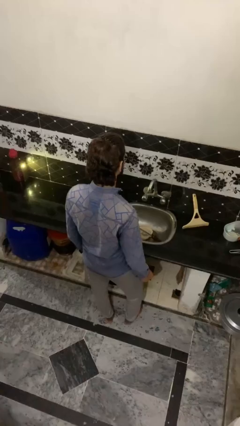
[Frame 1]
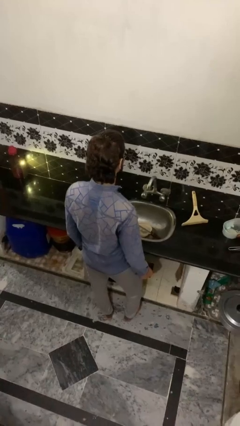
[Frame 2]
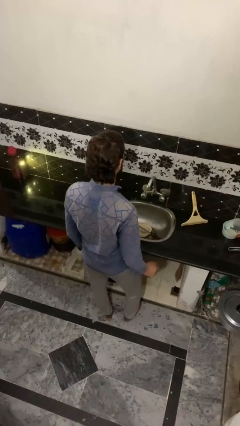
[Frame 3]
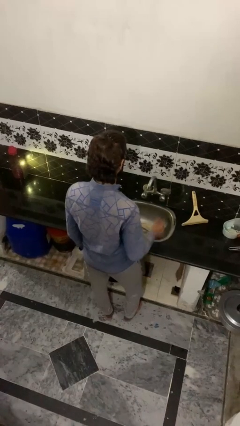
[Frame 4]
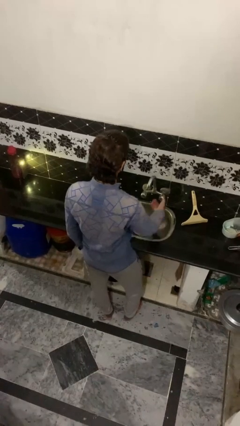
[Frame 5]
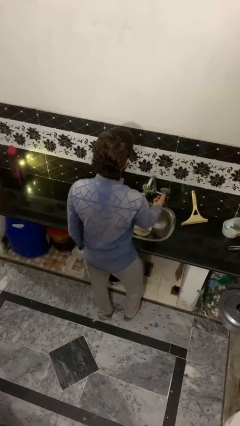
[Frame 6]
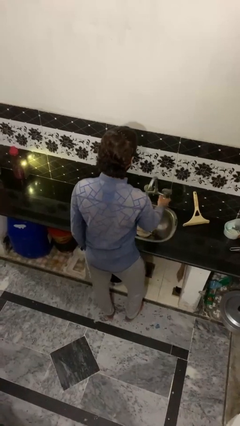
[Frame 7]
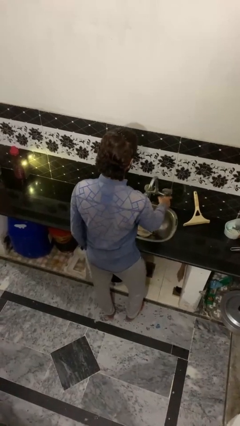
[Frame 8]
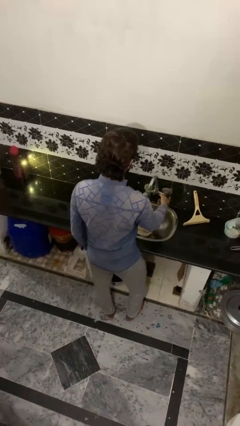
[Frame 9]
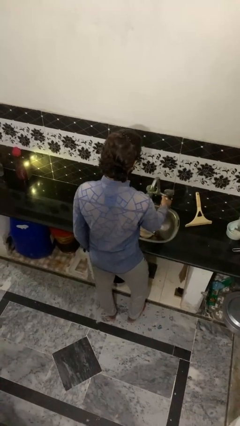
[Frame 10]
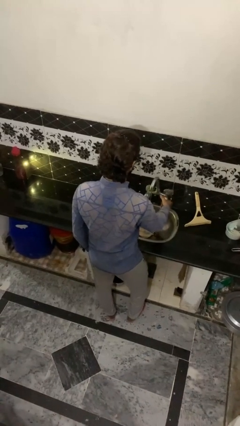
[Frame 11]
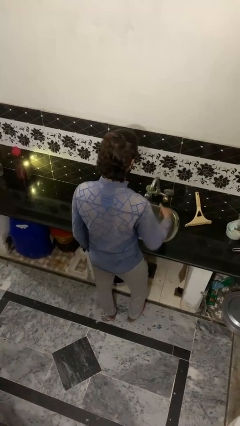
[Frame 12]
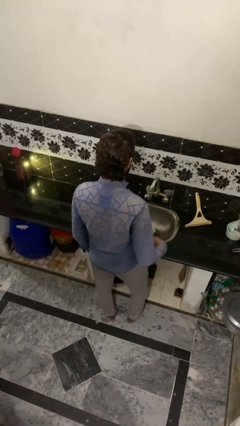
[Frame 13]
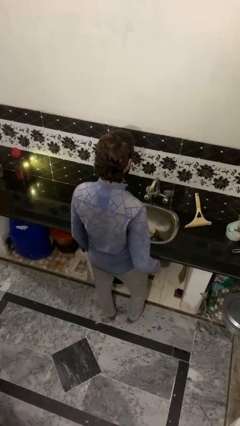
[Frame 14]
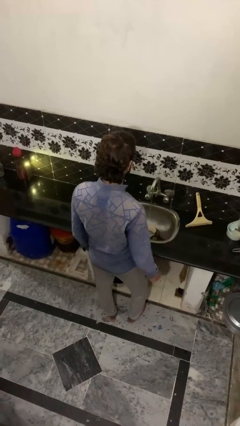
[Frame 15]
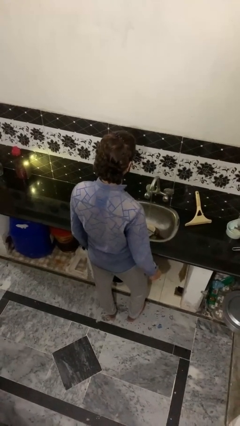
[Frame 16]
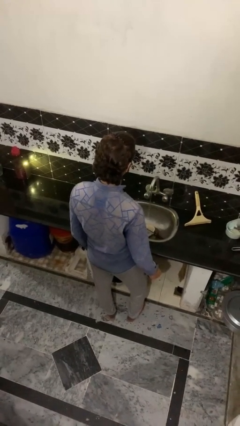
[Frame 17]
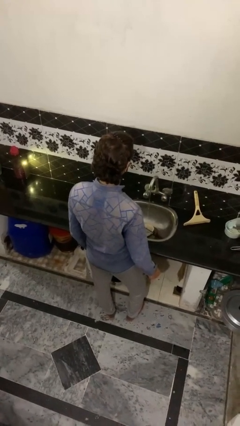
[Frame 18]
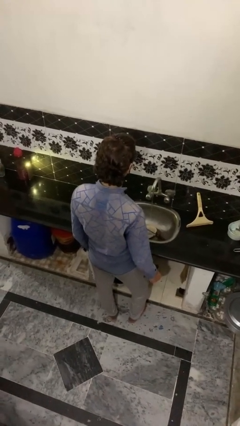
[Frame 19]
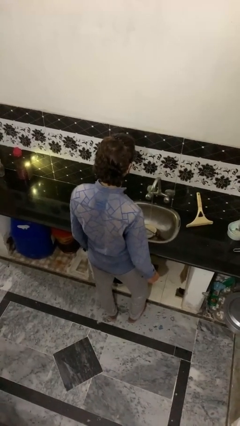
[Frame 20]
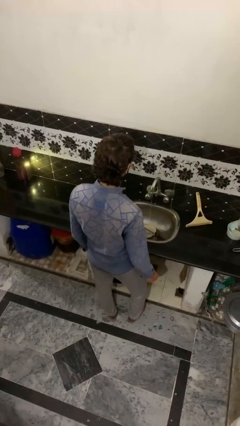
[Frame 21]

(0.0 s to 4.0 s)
person turns on faucet

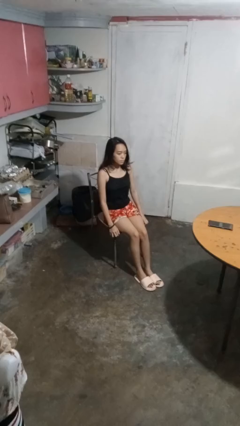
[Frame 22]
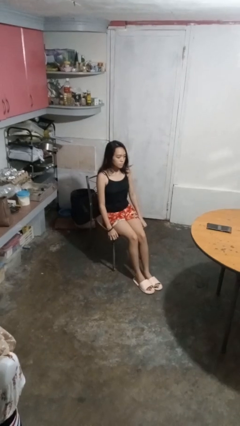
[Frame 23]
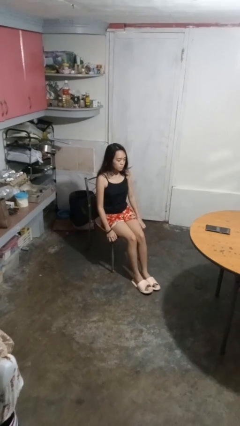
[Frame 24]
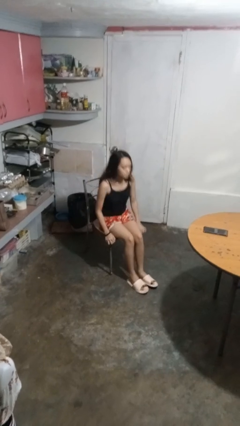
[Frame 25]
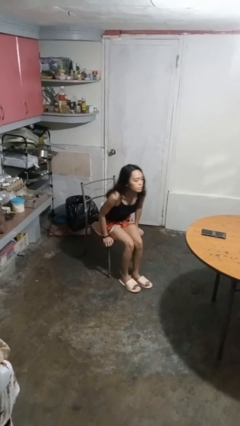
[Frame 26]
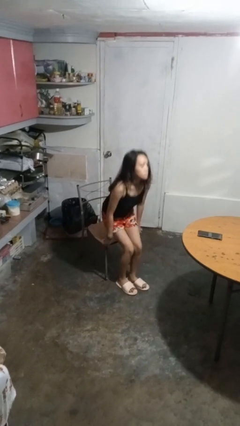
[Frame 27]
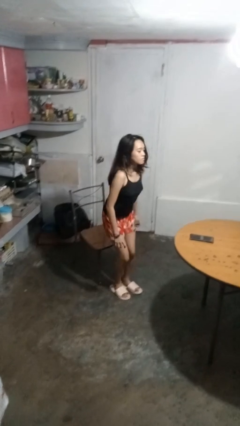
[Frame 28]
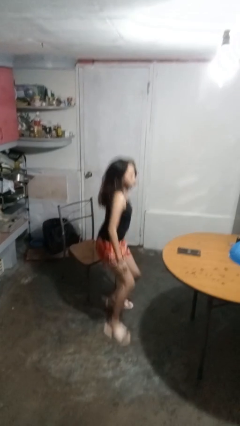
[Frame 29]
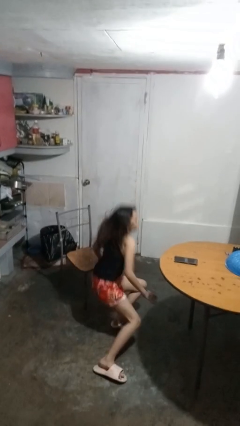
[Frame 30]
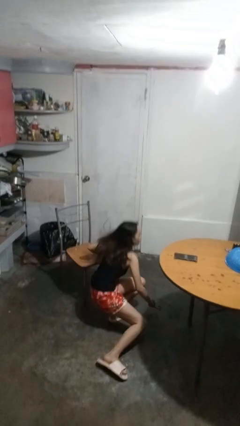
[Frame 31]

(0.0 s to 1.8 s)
person falls from chair

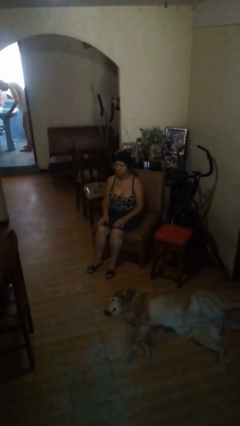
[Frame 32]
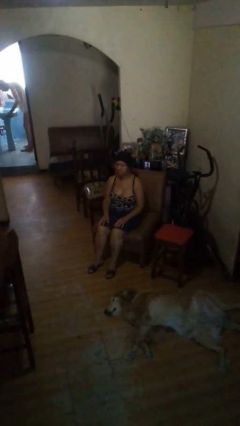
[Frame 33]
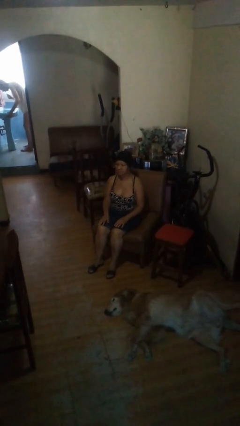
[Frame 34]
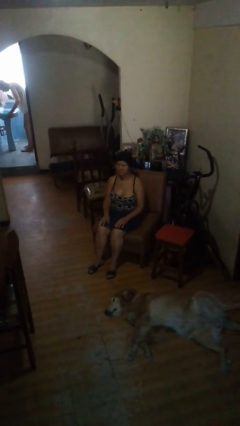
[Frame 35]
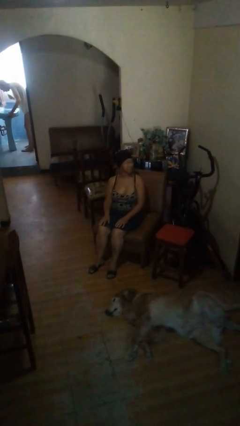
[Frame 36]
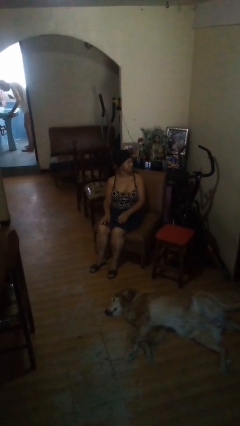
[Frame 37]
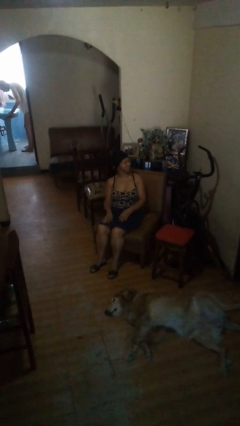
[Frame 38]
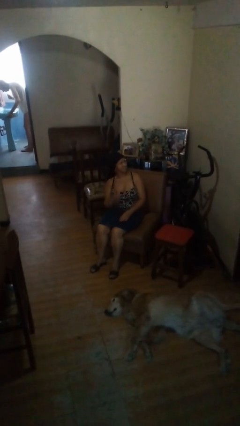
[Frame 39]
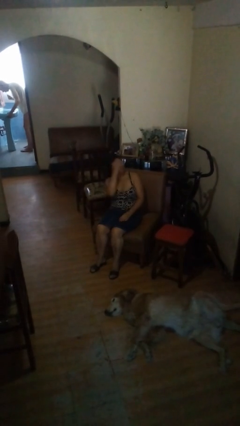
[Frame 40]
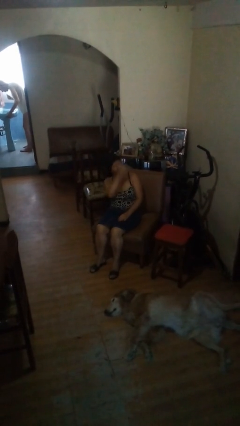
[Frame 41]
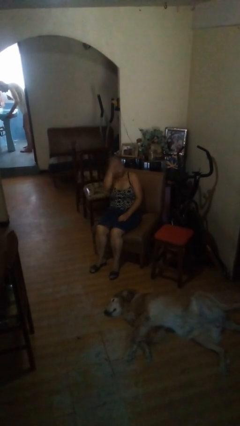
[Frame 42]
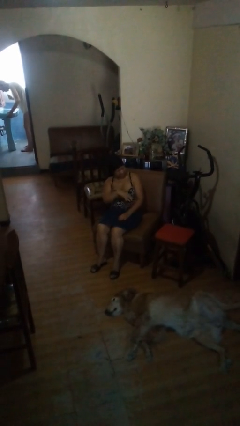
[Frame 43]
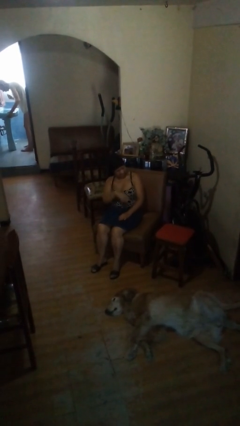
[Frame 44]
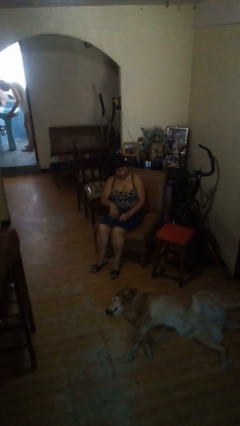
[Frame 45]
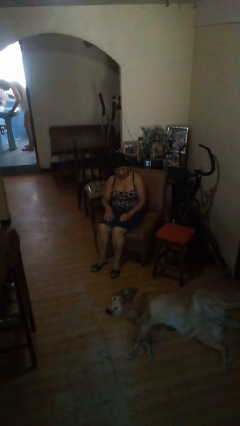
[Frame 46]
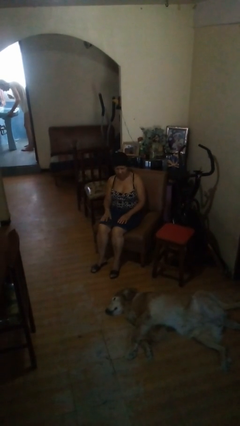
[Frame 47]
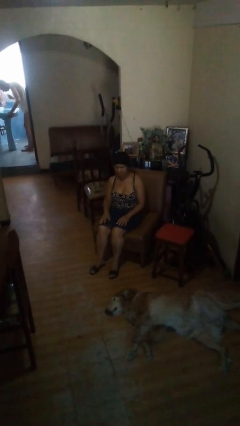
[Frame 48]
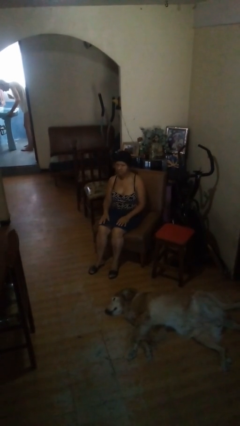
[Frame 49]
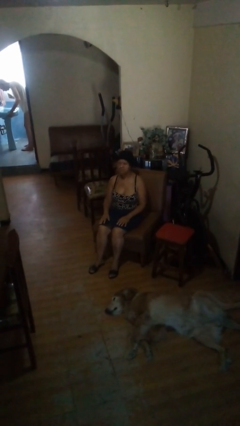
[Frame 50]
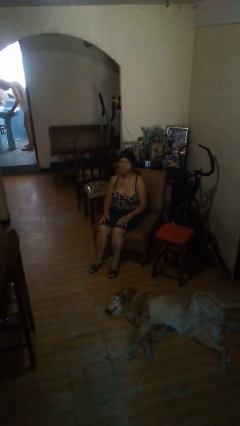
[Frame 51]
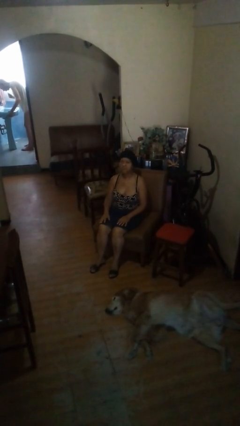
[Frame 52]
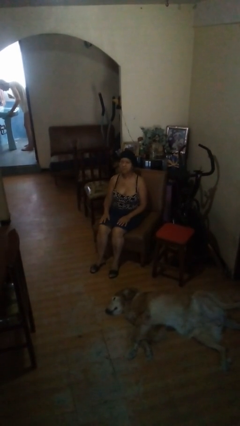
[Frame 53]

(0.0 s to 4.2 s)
person swats bug

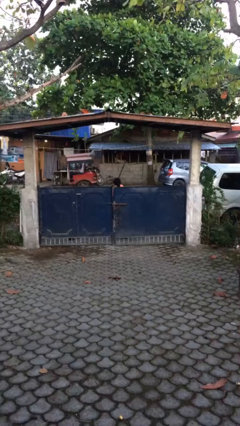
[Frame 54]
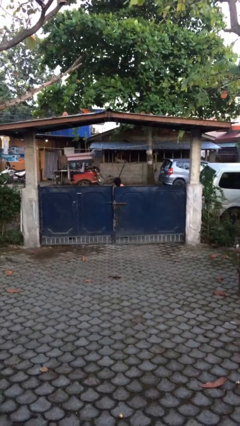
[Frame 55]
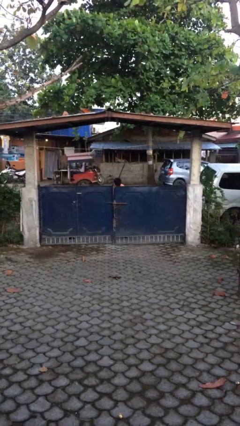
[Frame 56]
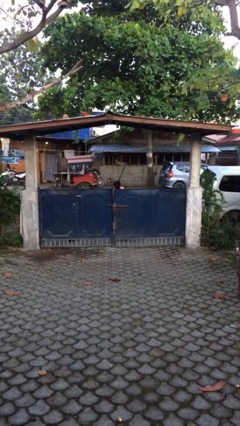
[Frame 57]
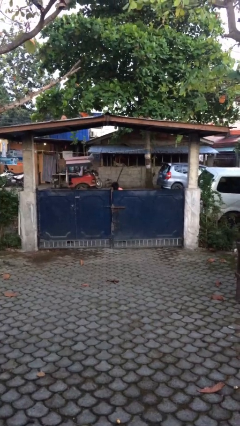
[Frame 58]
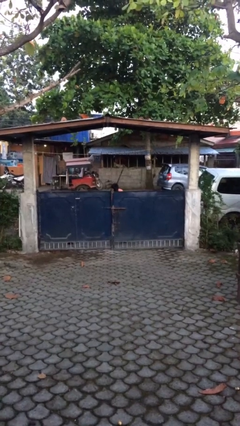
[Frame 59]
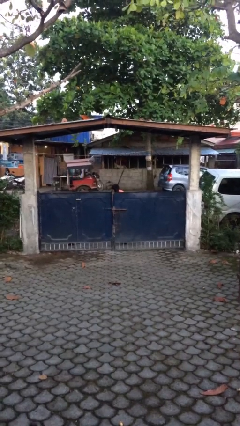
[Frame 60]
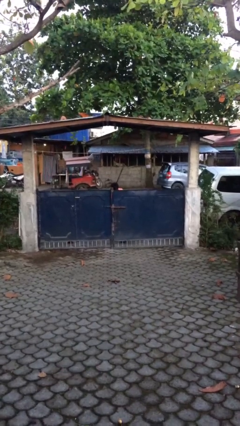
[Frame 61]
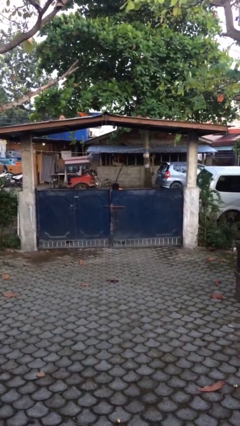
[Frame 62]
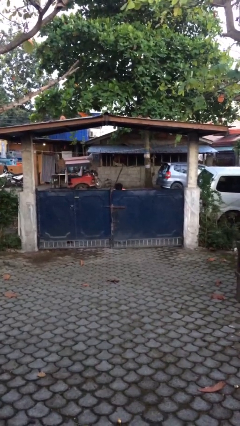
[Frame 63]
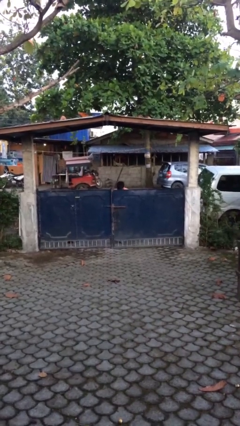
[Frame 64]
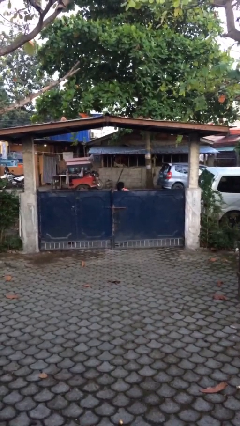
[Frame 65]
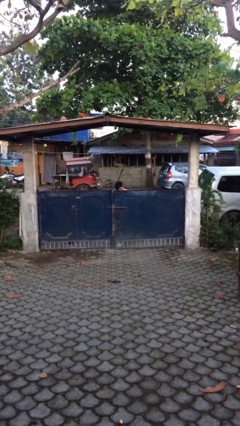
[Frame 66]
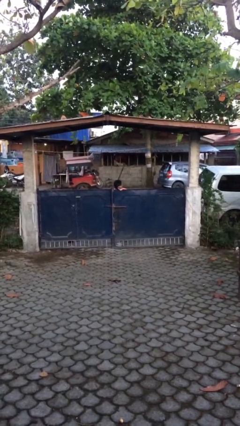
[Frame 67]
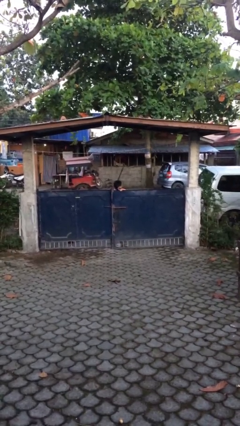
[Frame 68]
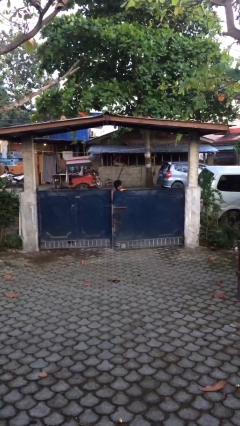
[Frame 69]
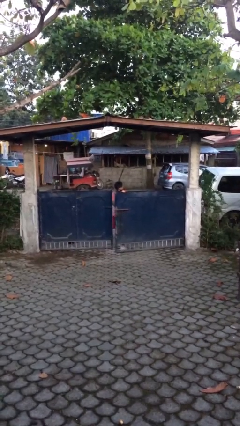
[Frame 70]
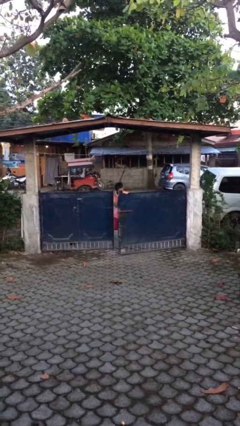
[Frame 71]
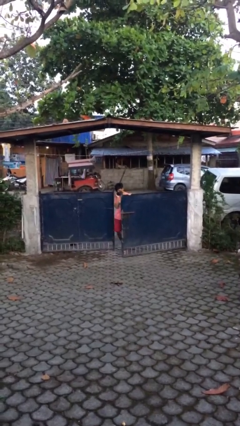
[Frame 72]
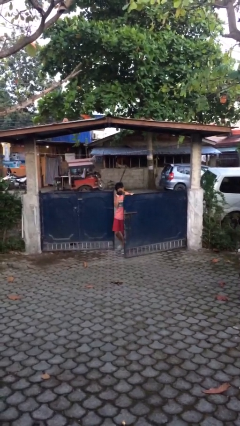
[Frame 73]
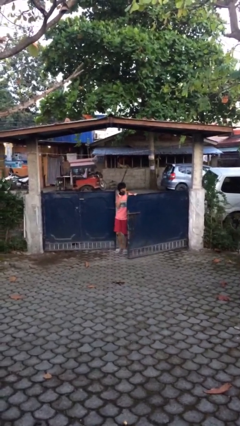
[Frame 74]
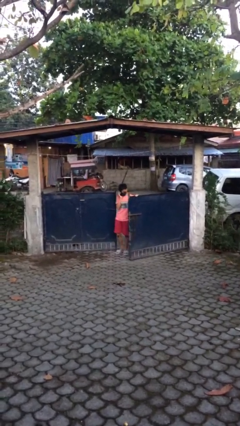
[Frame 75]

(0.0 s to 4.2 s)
person opens facility door

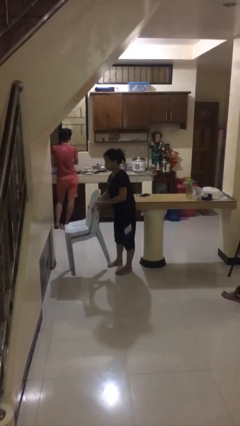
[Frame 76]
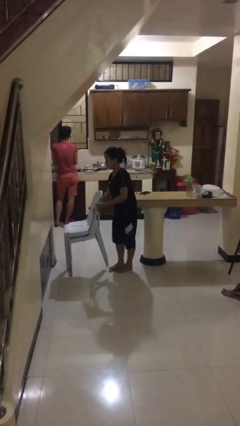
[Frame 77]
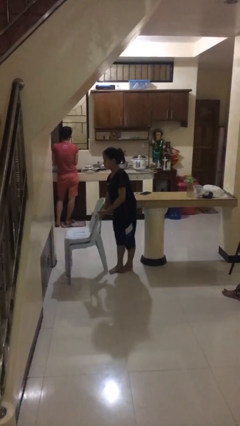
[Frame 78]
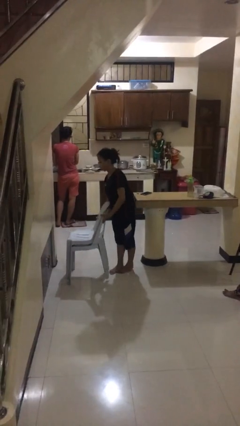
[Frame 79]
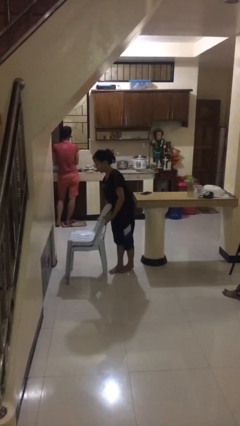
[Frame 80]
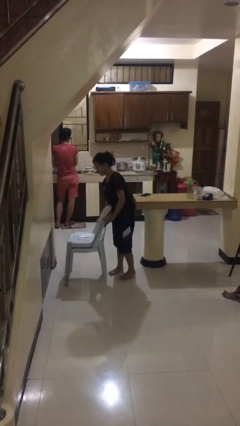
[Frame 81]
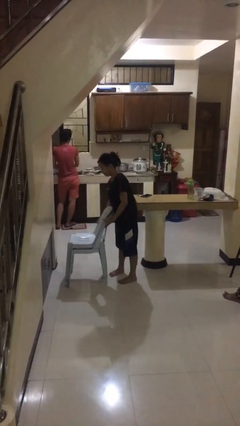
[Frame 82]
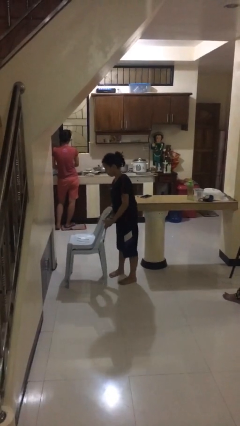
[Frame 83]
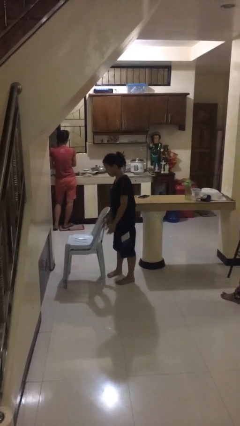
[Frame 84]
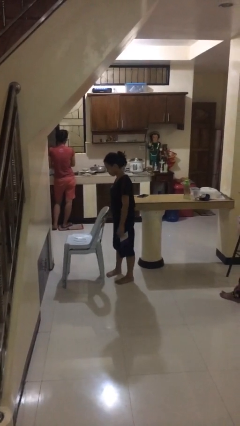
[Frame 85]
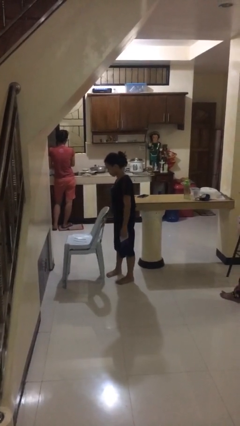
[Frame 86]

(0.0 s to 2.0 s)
person puts down object on floor

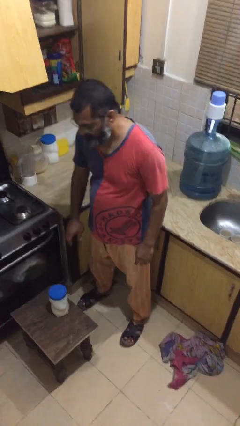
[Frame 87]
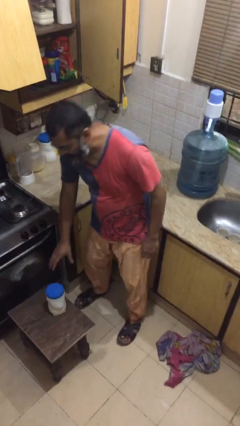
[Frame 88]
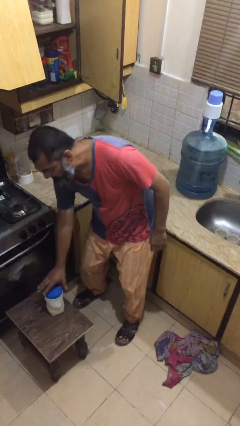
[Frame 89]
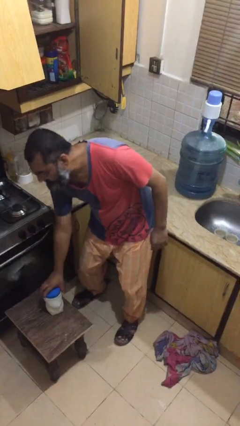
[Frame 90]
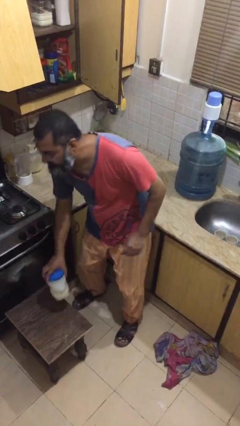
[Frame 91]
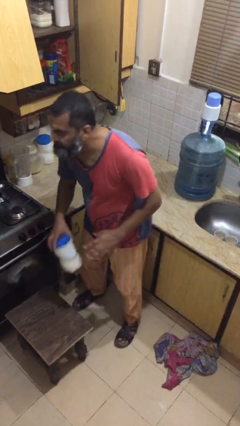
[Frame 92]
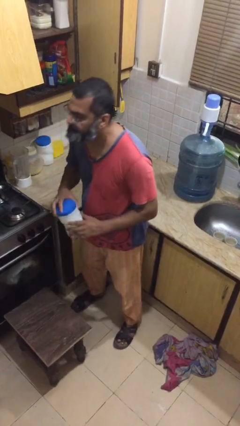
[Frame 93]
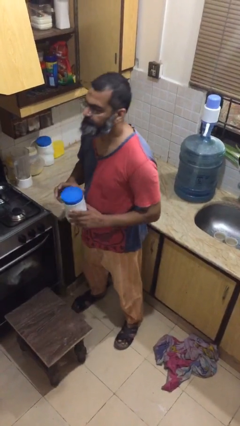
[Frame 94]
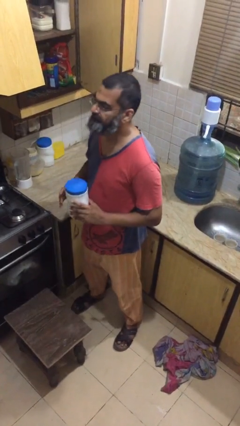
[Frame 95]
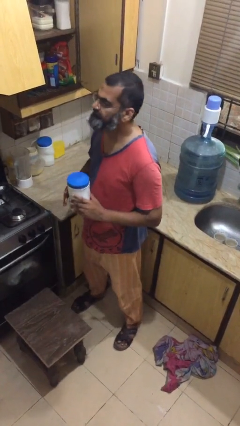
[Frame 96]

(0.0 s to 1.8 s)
person picks up object from table
